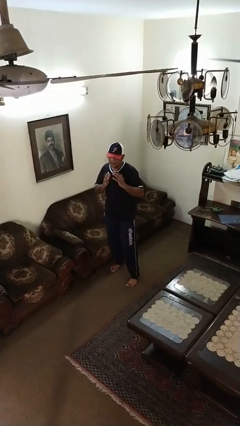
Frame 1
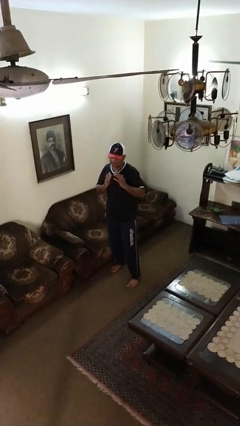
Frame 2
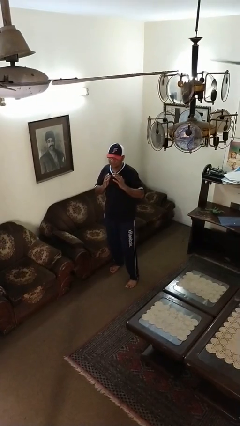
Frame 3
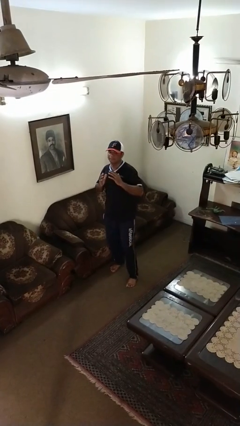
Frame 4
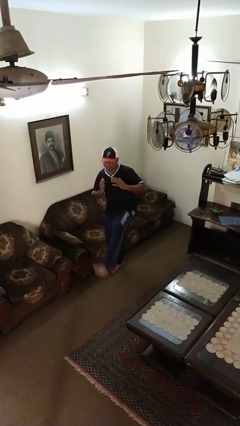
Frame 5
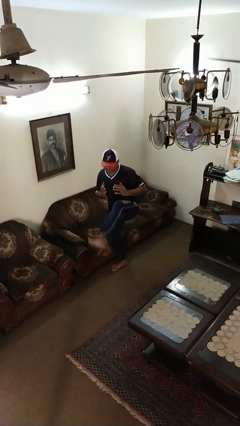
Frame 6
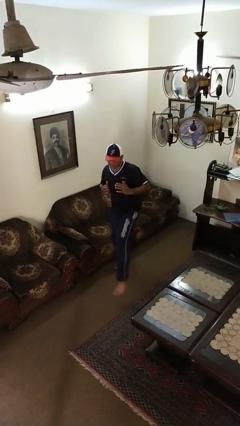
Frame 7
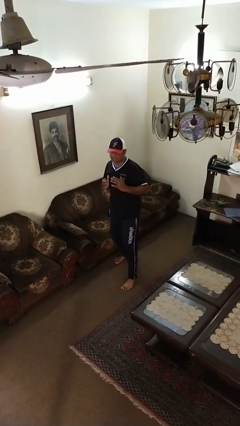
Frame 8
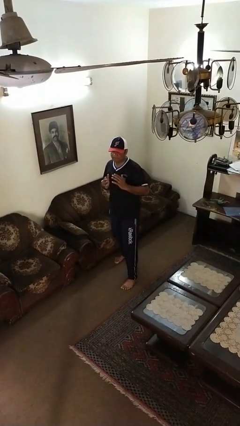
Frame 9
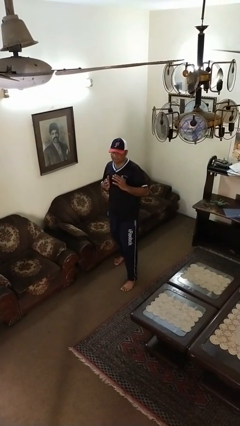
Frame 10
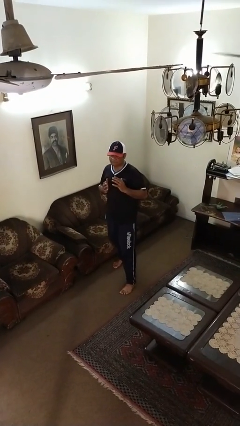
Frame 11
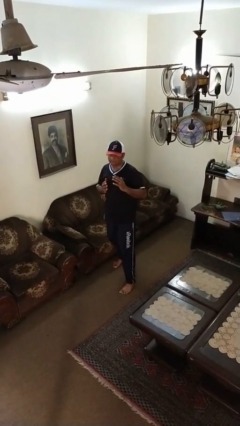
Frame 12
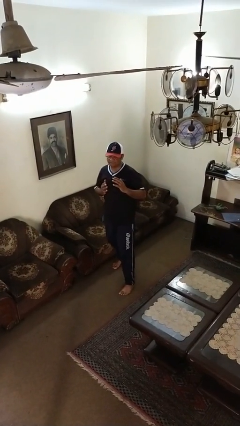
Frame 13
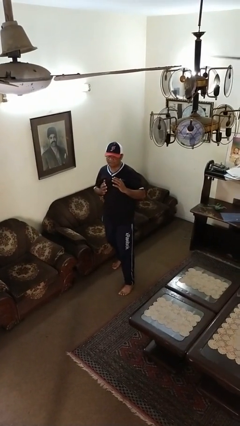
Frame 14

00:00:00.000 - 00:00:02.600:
person karate kicks

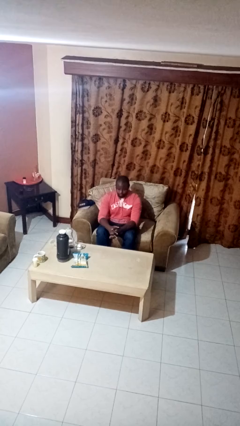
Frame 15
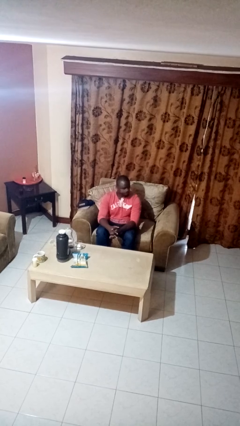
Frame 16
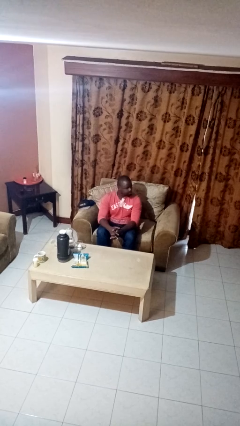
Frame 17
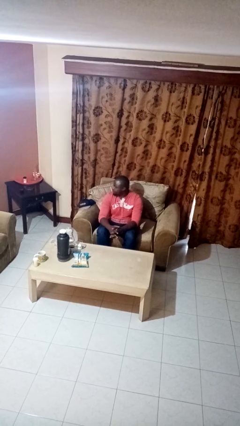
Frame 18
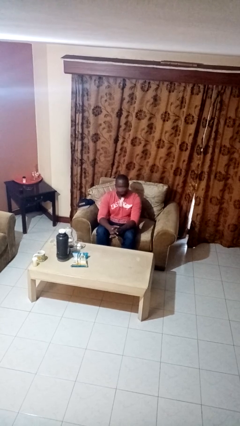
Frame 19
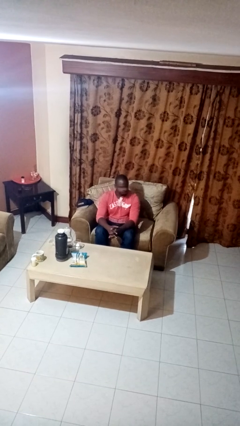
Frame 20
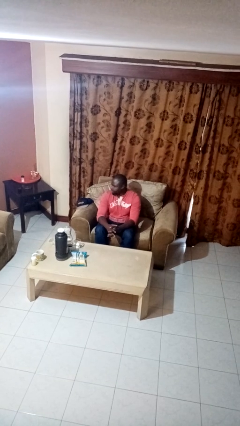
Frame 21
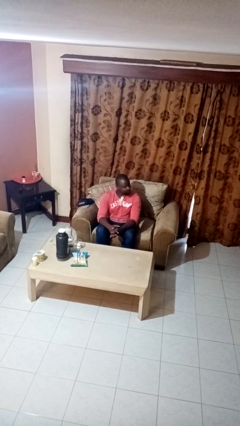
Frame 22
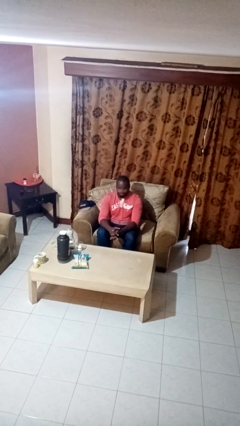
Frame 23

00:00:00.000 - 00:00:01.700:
person shakes head

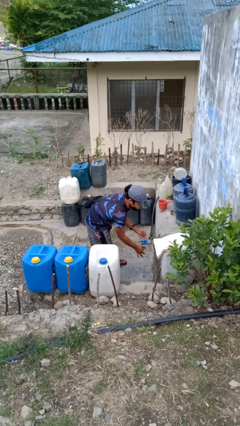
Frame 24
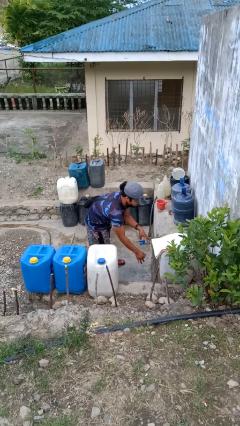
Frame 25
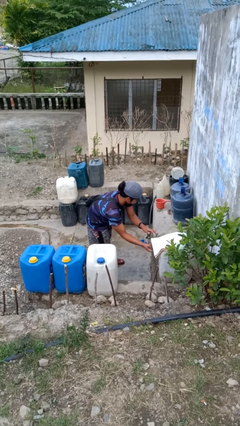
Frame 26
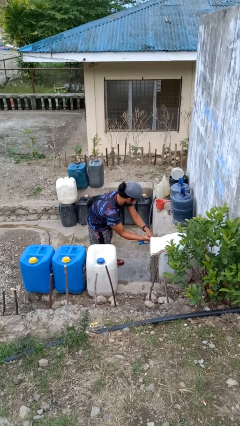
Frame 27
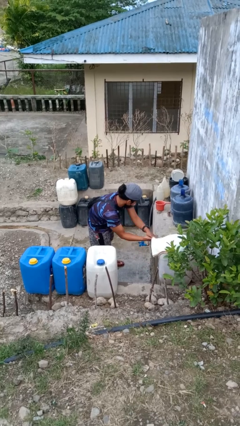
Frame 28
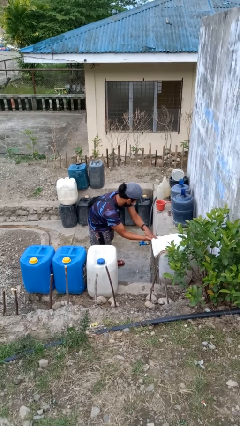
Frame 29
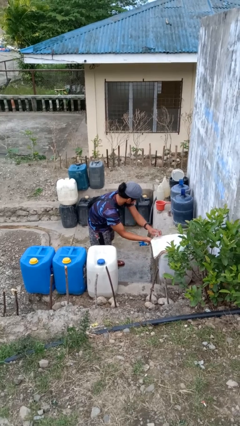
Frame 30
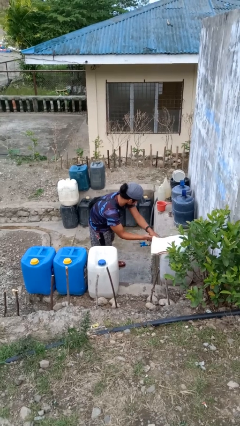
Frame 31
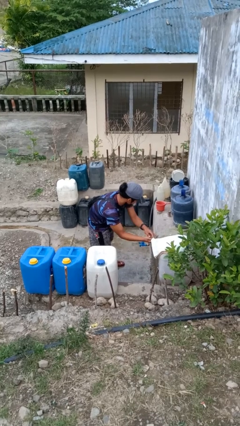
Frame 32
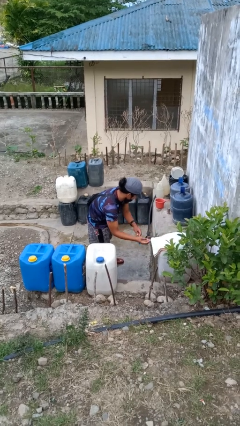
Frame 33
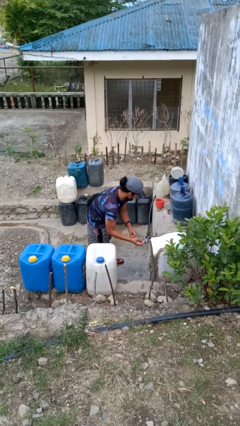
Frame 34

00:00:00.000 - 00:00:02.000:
person dries hands with towel

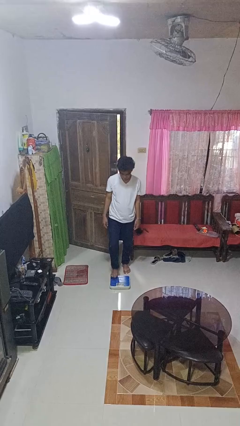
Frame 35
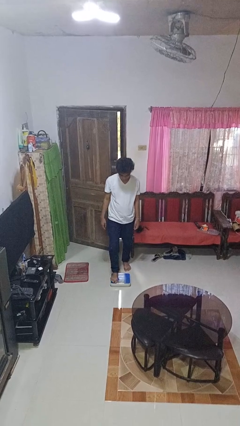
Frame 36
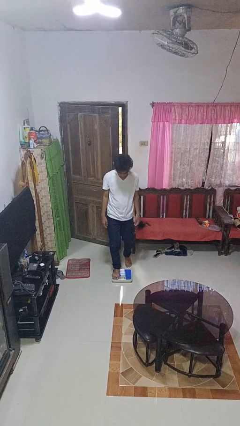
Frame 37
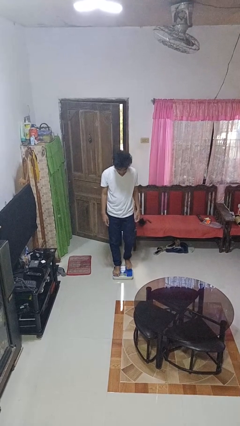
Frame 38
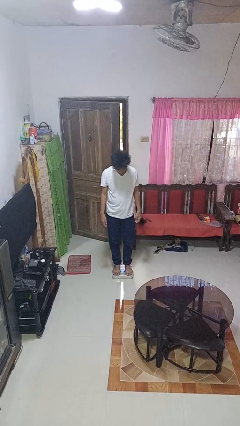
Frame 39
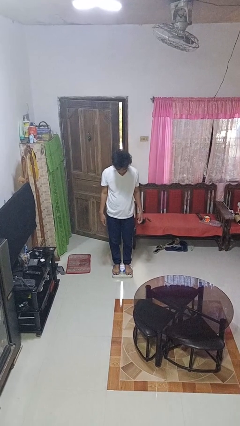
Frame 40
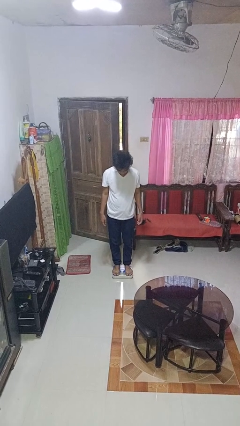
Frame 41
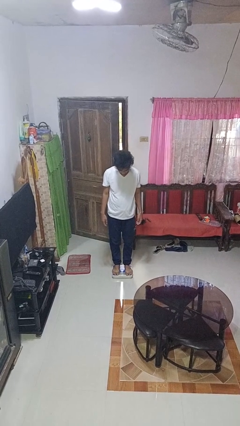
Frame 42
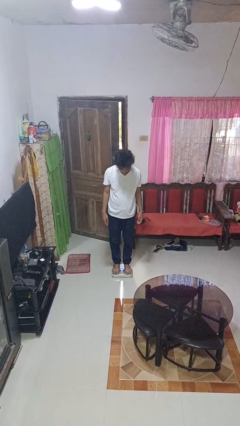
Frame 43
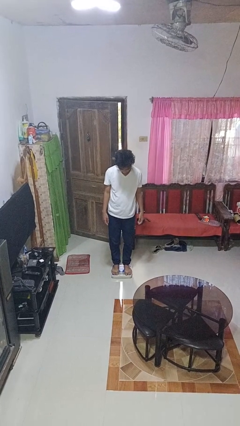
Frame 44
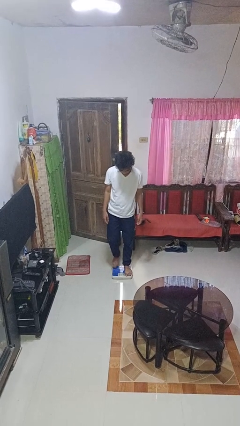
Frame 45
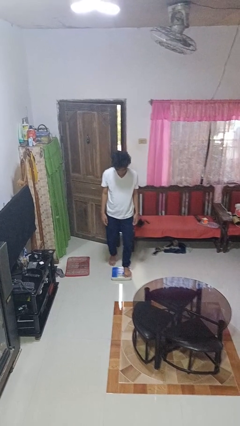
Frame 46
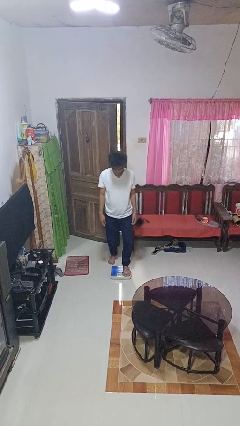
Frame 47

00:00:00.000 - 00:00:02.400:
person uses bodyweight scale

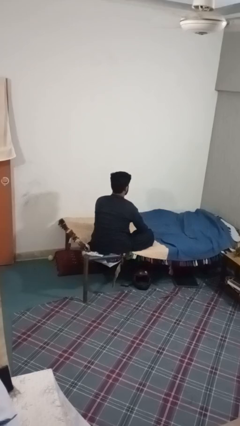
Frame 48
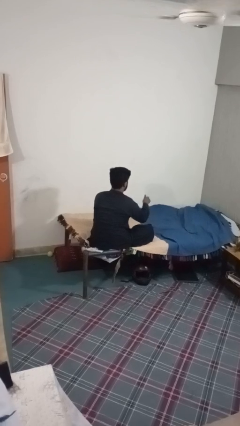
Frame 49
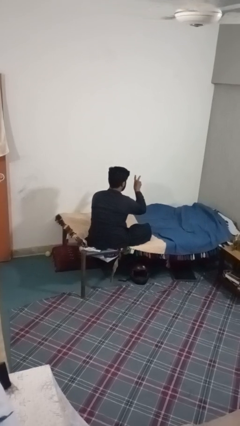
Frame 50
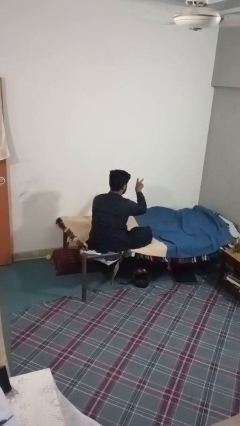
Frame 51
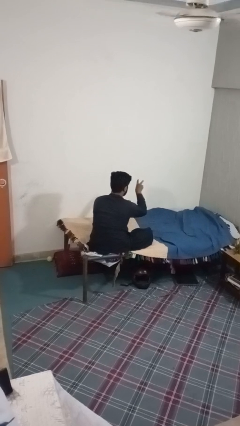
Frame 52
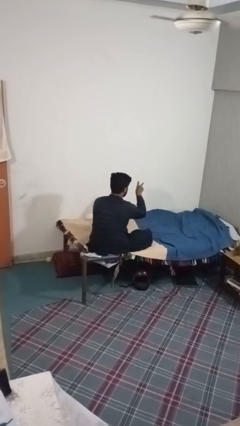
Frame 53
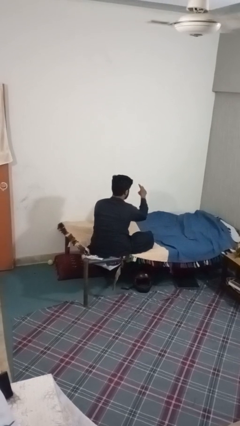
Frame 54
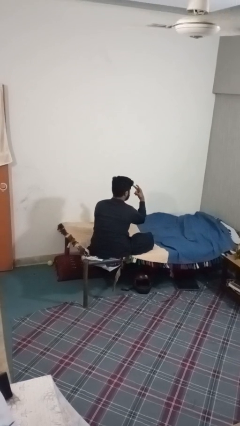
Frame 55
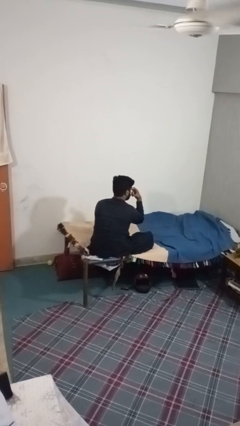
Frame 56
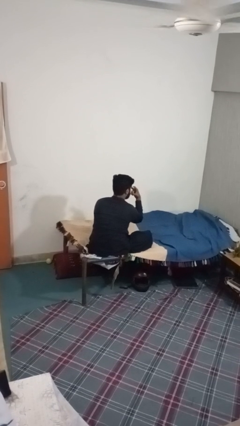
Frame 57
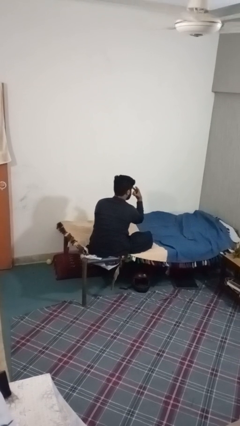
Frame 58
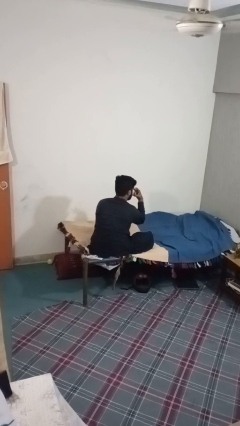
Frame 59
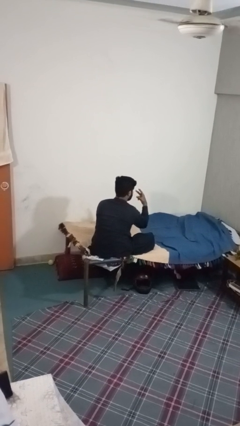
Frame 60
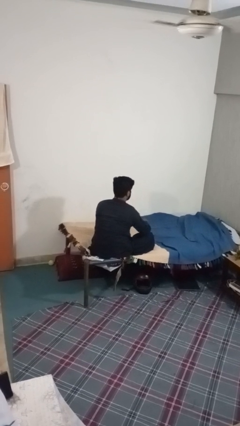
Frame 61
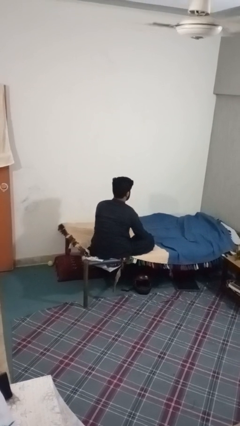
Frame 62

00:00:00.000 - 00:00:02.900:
person gestures watch closely

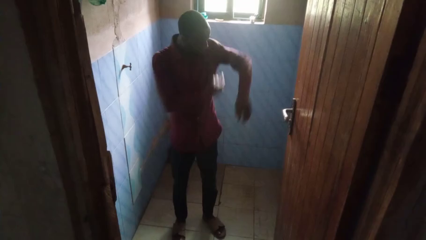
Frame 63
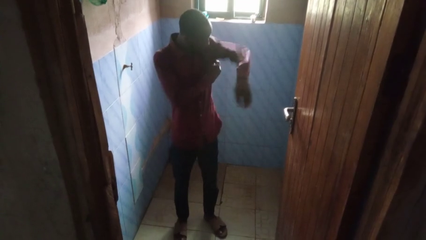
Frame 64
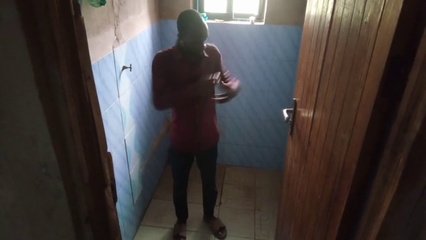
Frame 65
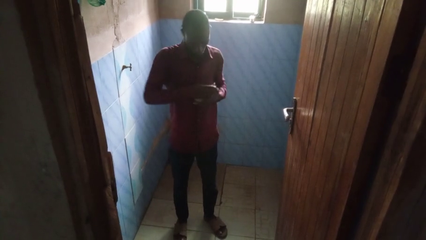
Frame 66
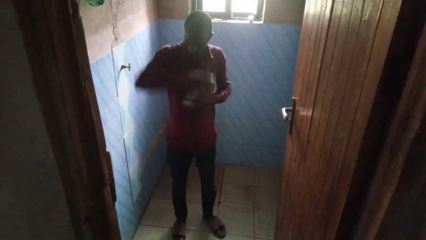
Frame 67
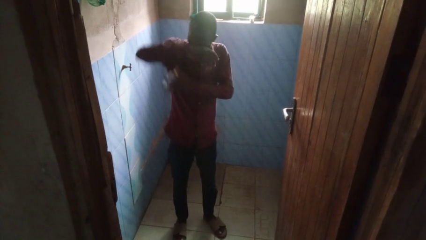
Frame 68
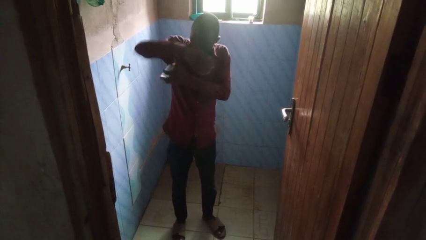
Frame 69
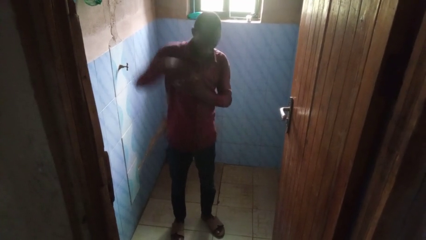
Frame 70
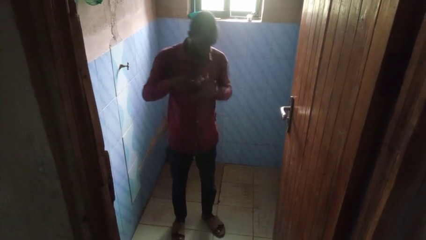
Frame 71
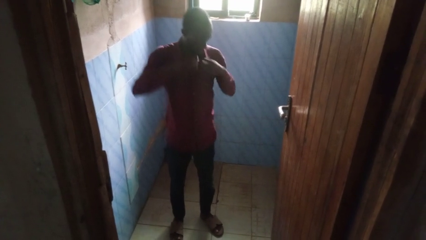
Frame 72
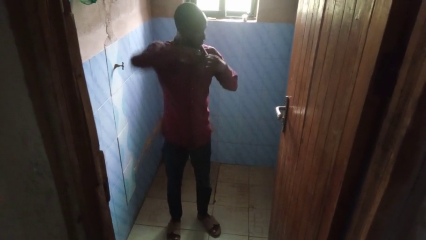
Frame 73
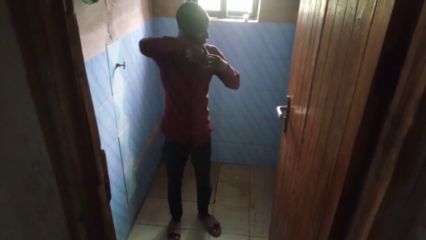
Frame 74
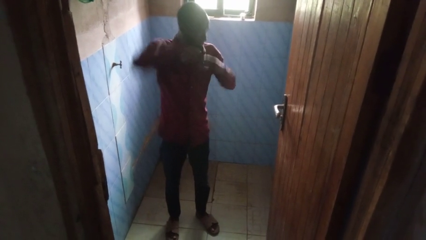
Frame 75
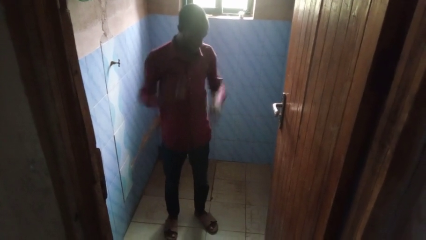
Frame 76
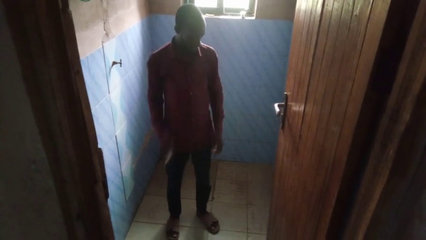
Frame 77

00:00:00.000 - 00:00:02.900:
person applies deodorant

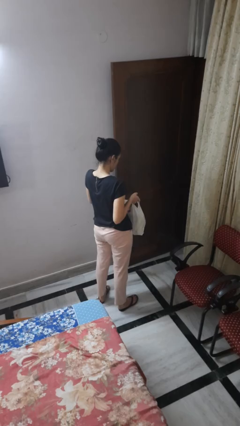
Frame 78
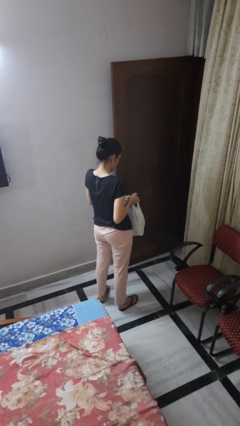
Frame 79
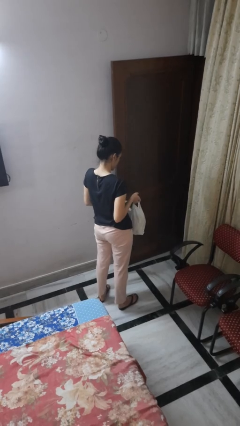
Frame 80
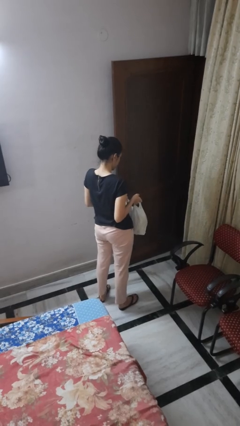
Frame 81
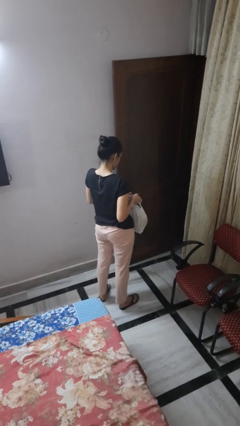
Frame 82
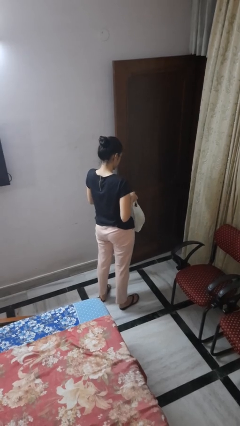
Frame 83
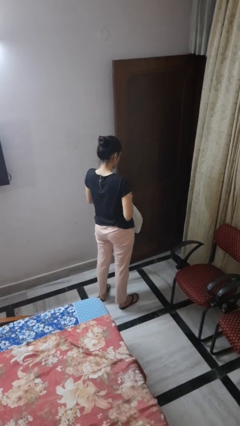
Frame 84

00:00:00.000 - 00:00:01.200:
person puts object into bag

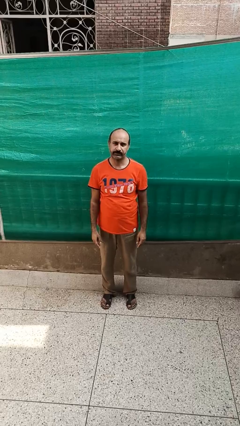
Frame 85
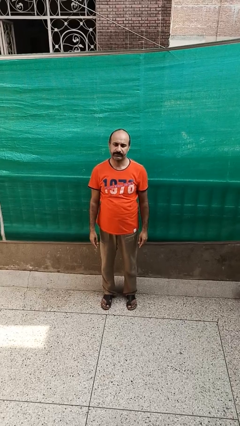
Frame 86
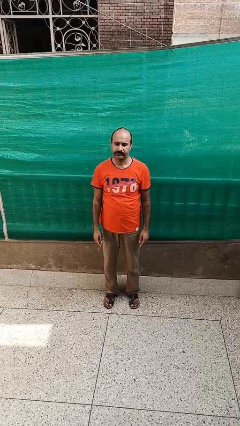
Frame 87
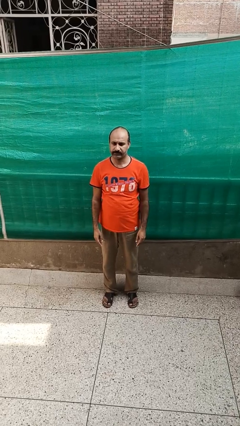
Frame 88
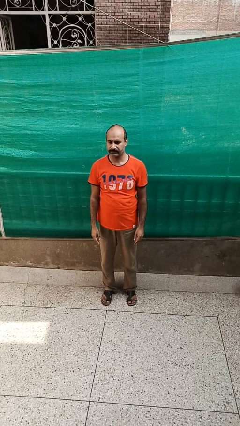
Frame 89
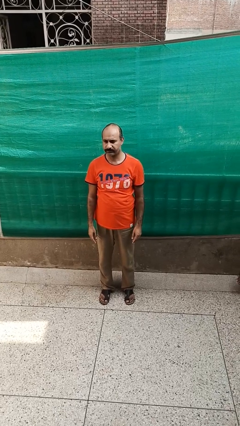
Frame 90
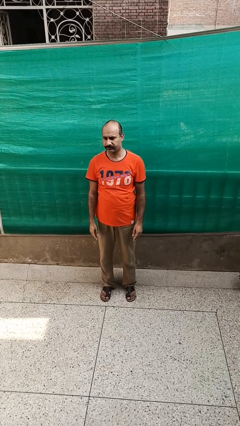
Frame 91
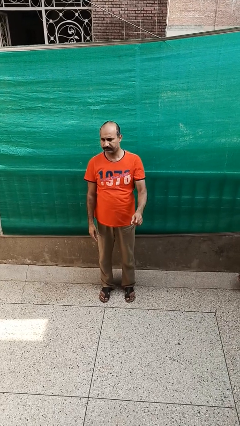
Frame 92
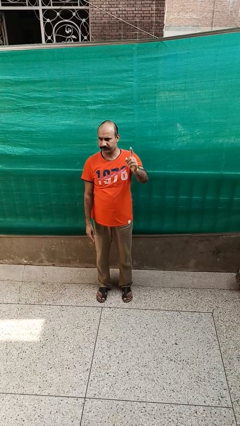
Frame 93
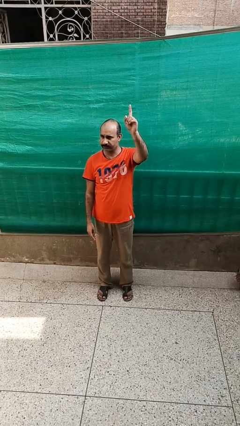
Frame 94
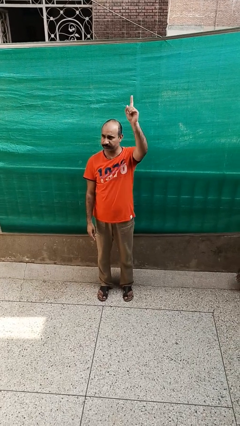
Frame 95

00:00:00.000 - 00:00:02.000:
person gestures lower hand
